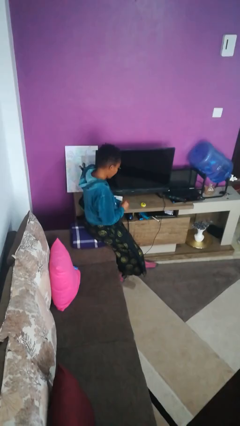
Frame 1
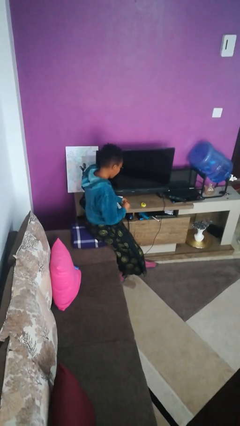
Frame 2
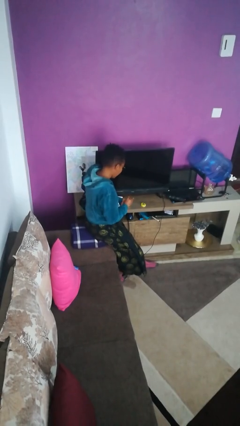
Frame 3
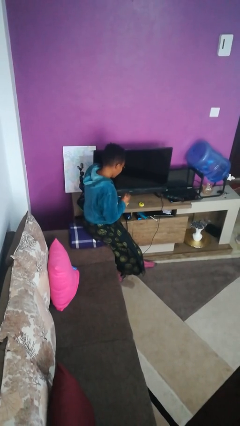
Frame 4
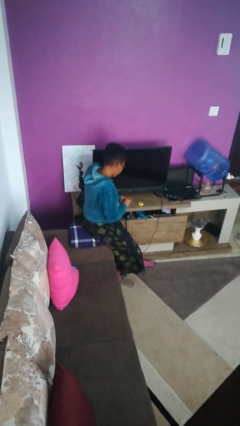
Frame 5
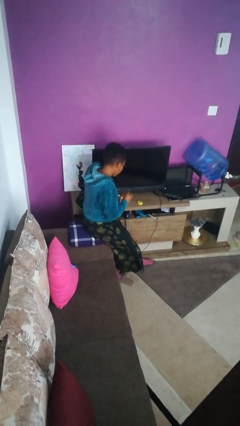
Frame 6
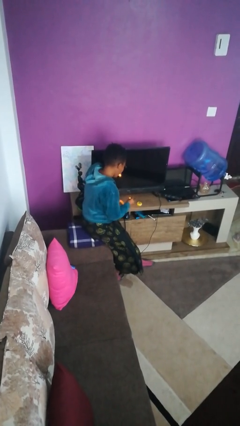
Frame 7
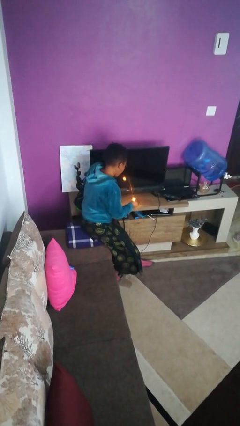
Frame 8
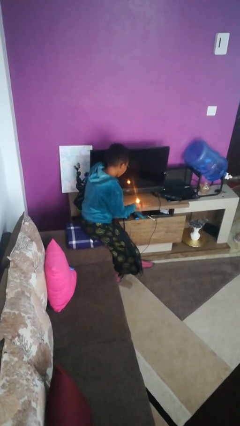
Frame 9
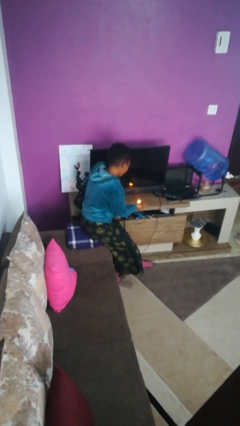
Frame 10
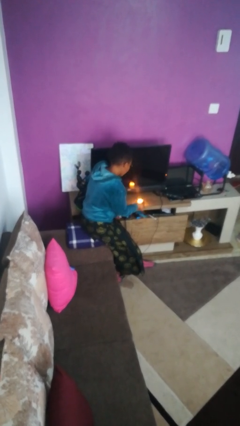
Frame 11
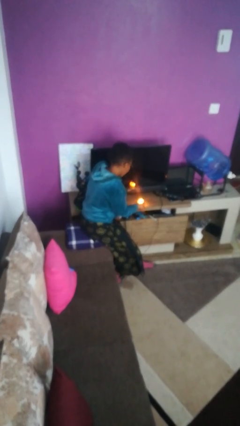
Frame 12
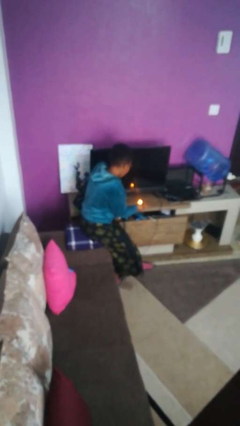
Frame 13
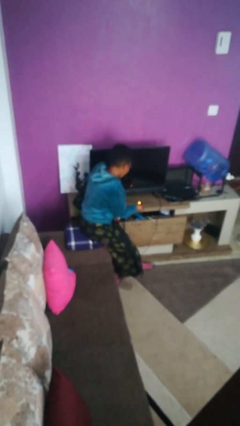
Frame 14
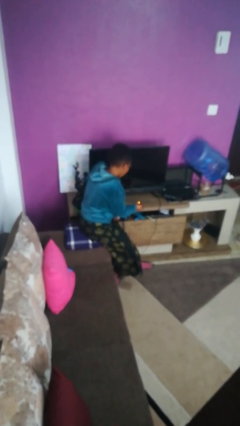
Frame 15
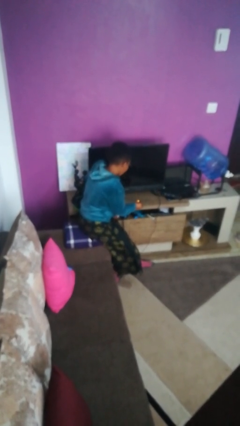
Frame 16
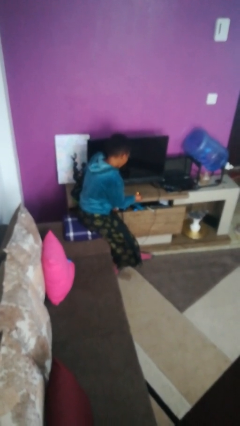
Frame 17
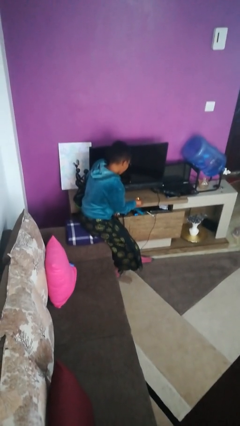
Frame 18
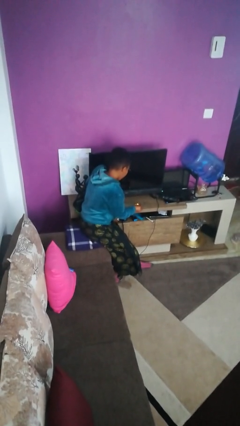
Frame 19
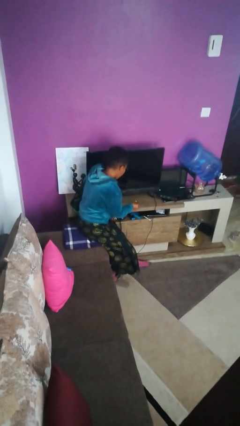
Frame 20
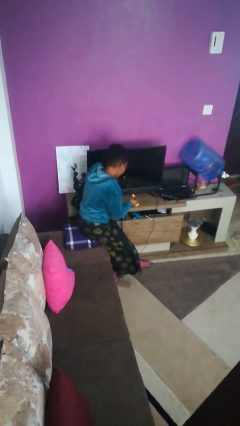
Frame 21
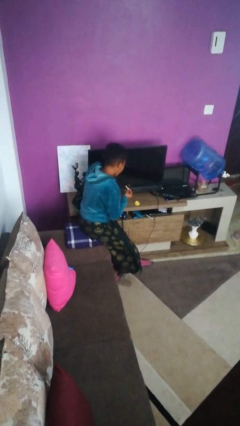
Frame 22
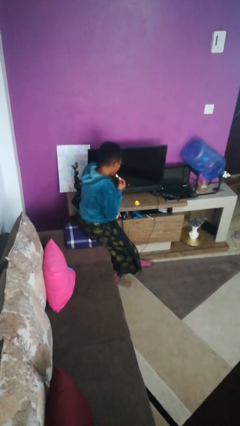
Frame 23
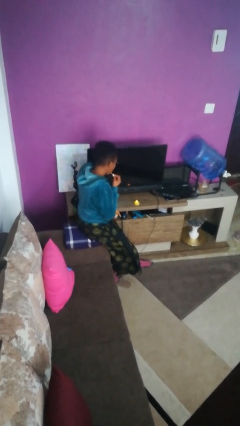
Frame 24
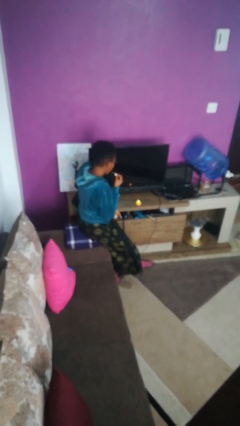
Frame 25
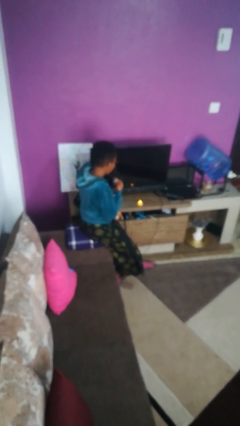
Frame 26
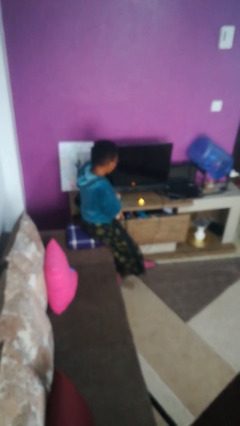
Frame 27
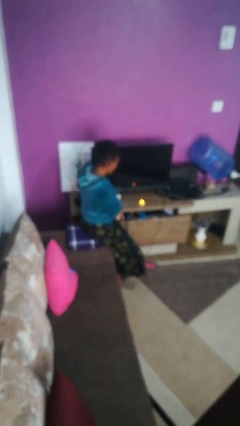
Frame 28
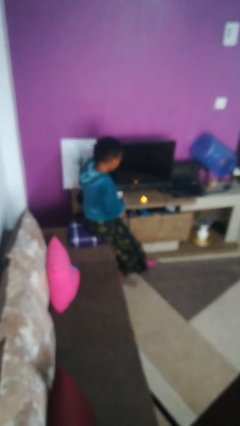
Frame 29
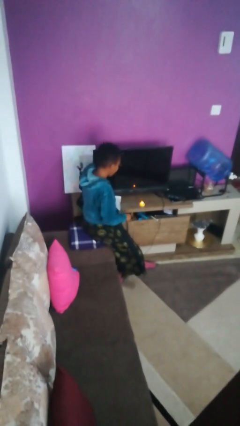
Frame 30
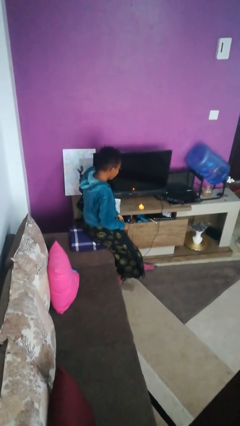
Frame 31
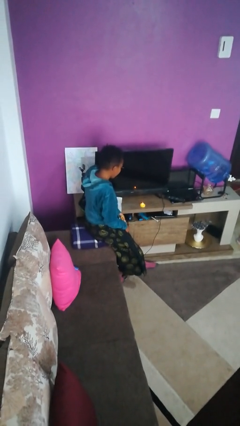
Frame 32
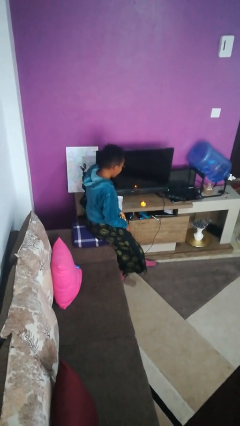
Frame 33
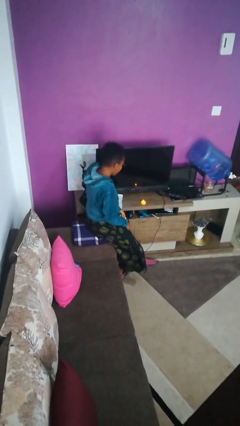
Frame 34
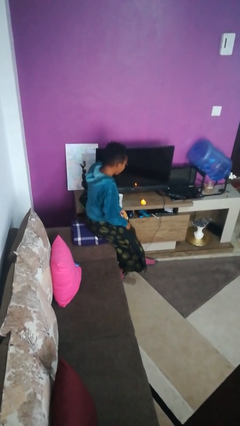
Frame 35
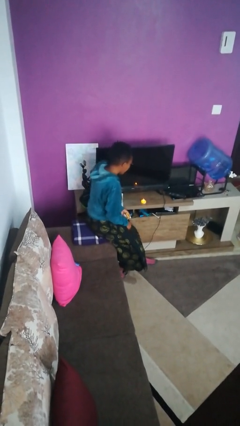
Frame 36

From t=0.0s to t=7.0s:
person lights candle

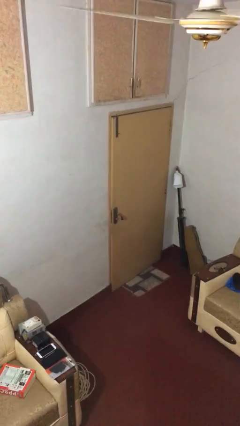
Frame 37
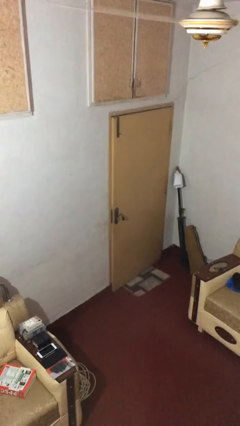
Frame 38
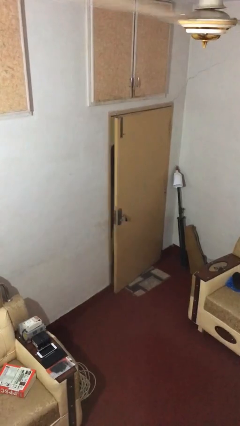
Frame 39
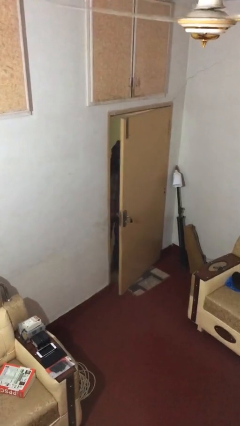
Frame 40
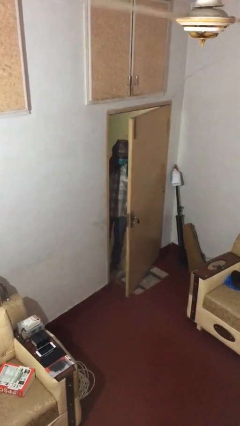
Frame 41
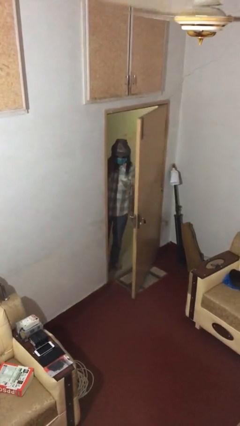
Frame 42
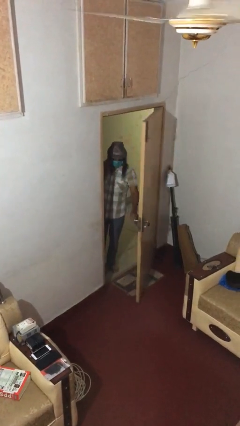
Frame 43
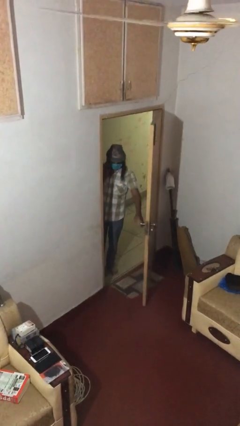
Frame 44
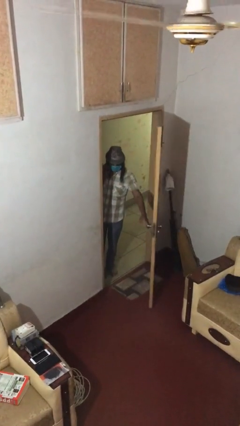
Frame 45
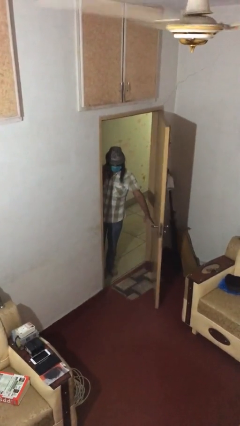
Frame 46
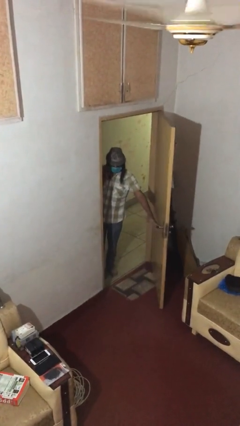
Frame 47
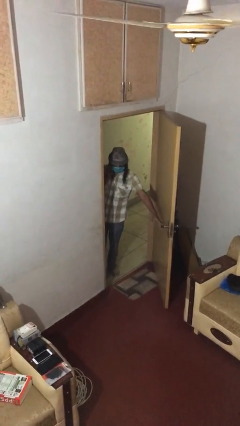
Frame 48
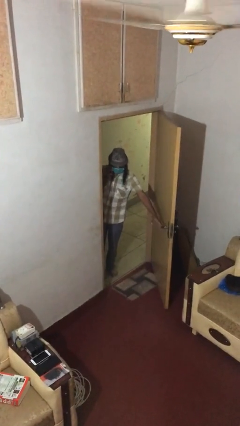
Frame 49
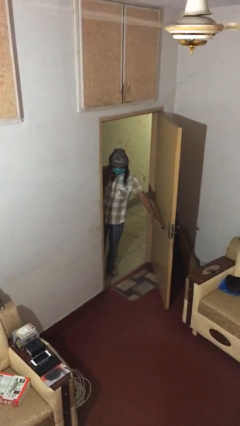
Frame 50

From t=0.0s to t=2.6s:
person opens facility door

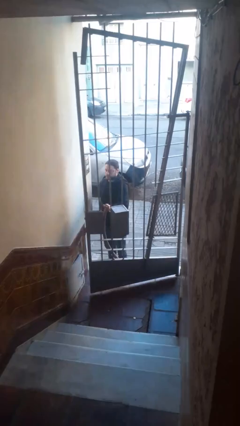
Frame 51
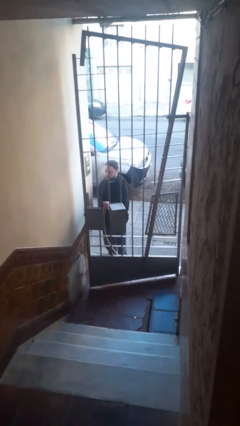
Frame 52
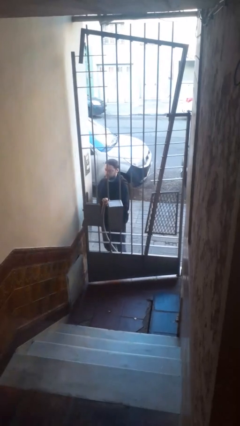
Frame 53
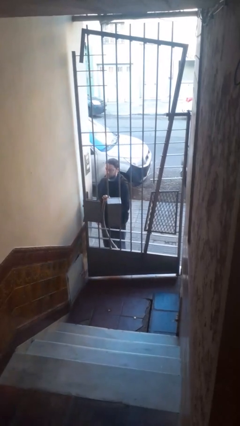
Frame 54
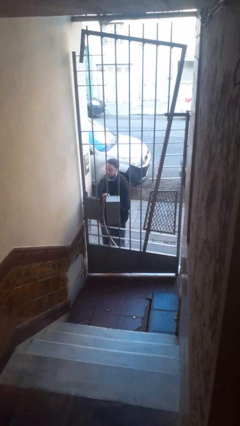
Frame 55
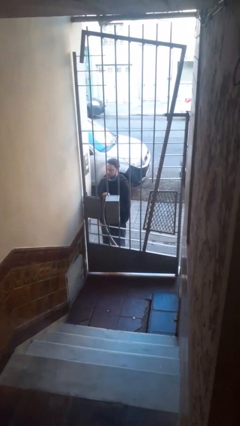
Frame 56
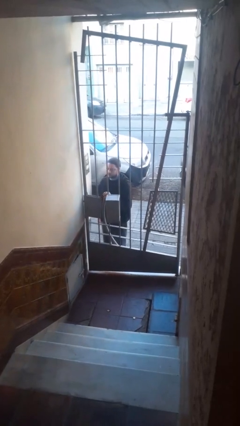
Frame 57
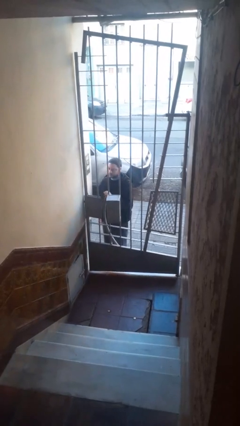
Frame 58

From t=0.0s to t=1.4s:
person closes gate

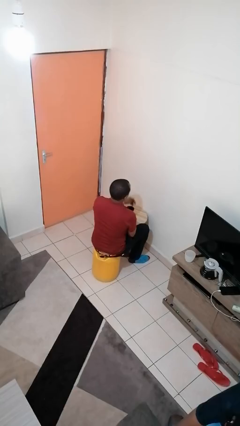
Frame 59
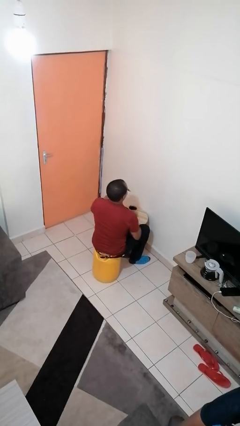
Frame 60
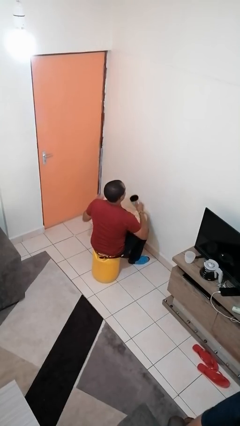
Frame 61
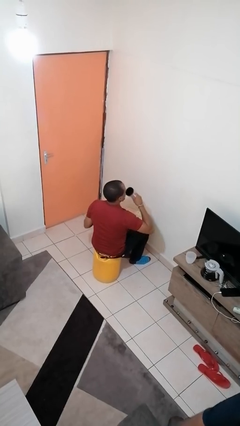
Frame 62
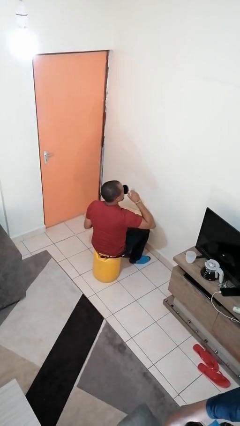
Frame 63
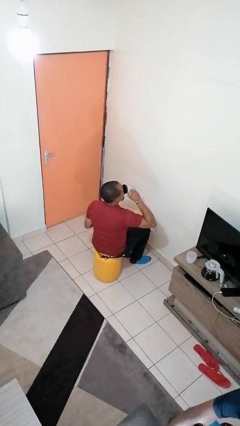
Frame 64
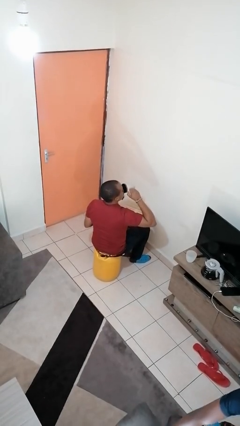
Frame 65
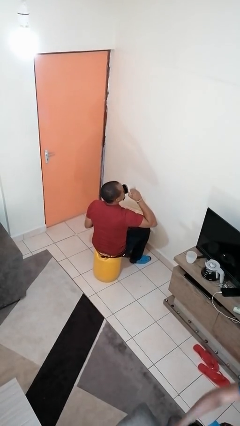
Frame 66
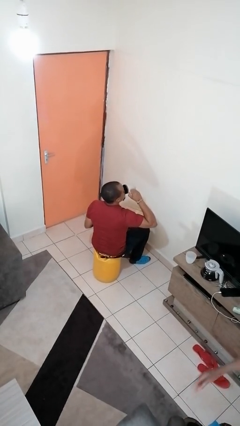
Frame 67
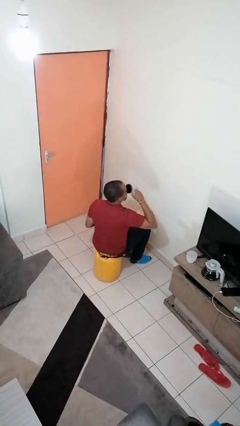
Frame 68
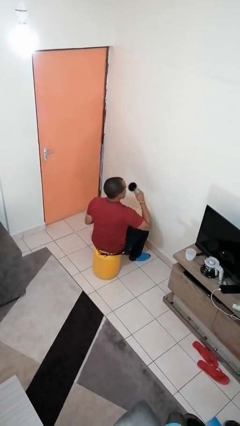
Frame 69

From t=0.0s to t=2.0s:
person drinks from mug

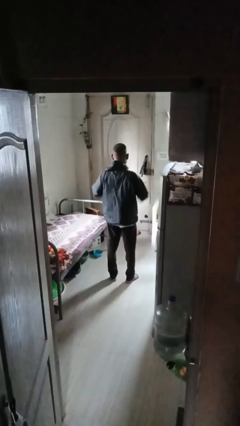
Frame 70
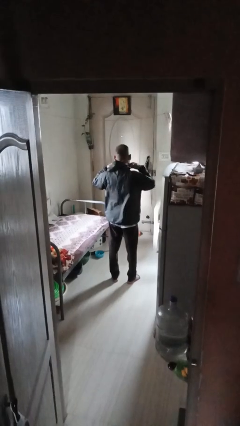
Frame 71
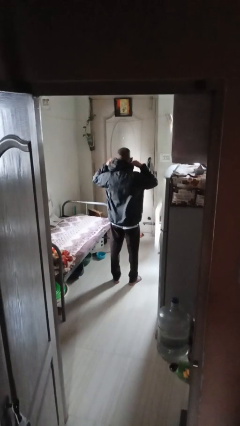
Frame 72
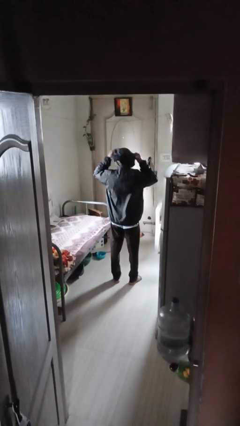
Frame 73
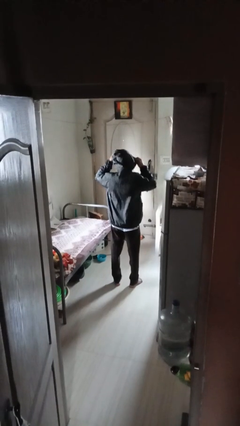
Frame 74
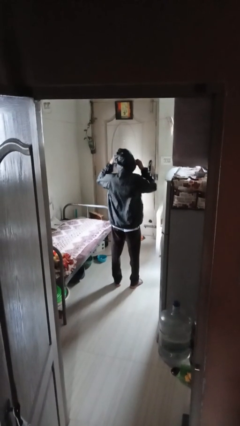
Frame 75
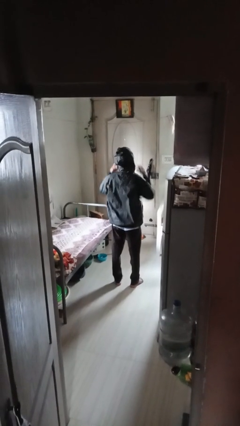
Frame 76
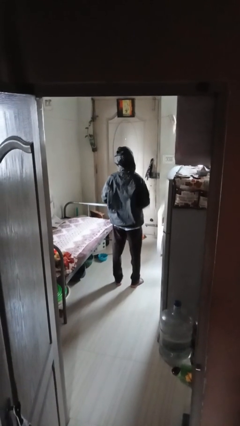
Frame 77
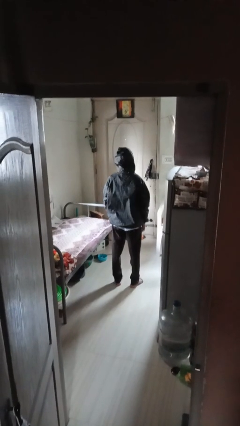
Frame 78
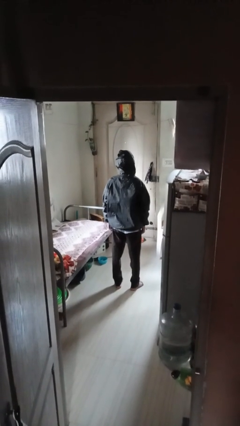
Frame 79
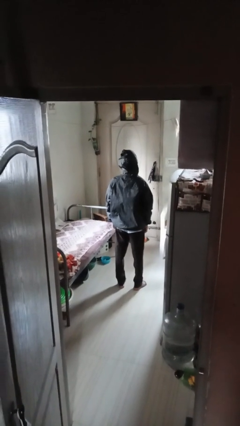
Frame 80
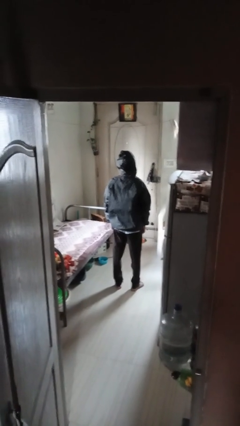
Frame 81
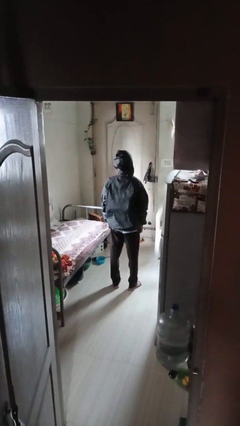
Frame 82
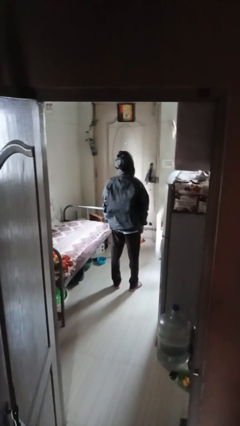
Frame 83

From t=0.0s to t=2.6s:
person puts on hoodie

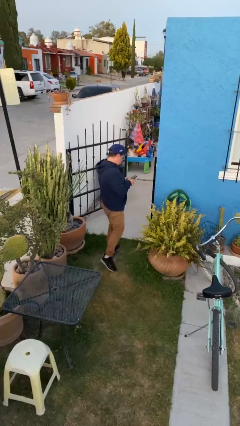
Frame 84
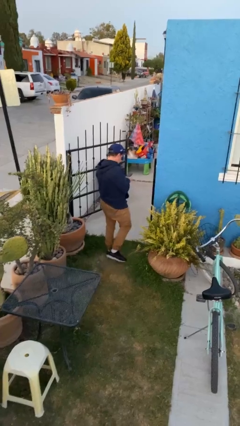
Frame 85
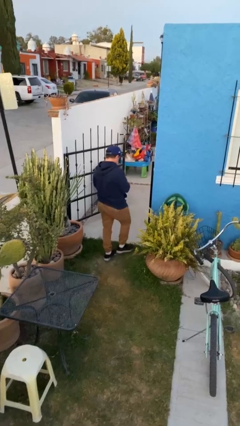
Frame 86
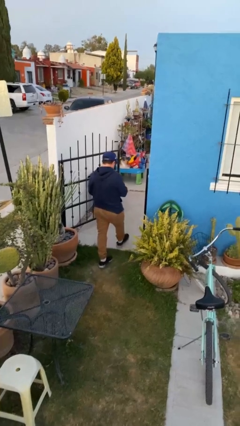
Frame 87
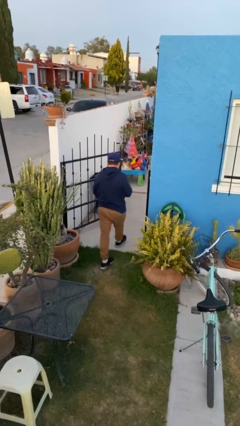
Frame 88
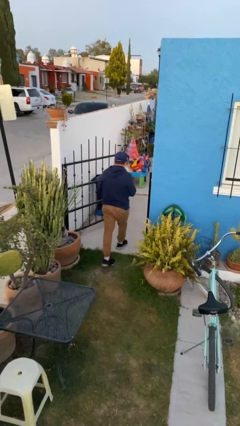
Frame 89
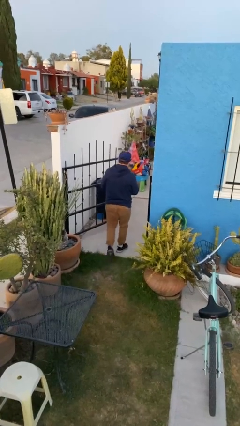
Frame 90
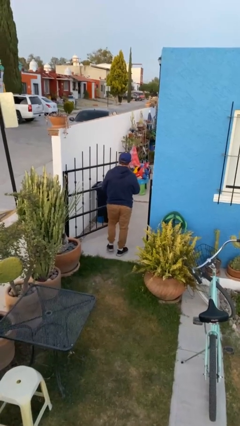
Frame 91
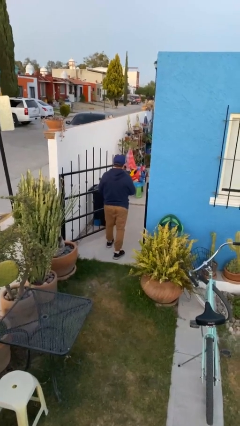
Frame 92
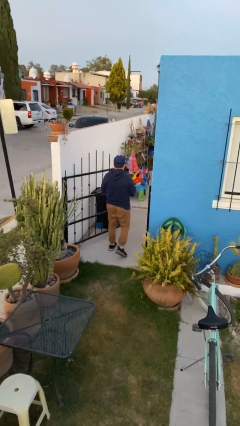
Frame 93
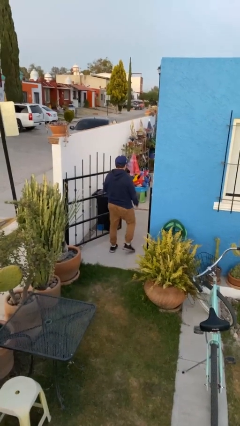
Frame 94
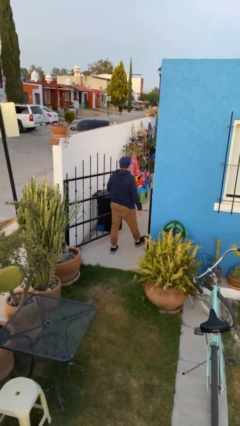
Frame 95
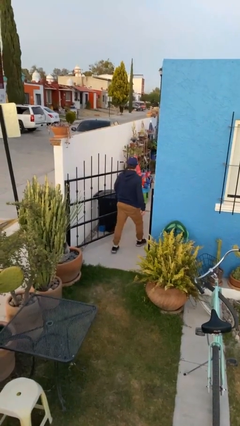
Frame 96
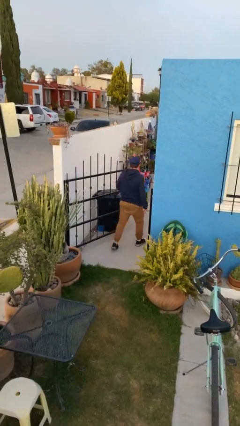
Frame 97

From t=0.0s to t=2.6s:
person exits scene through structure
